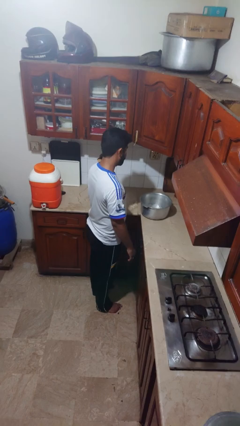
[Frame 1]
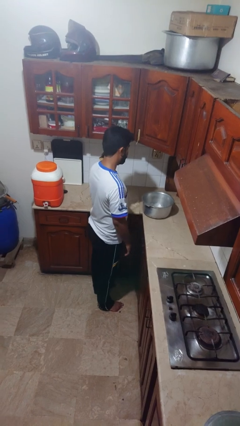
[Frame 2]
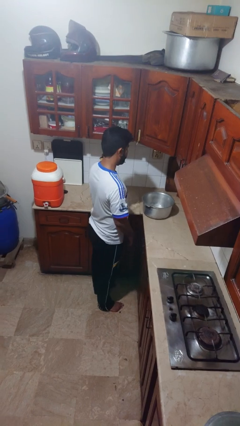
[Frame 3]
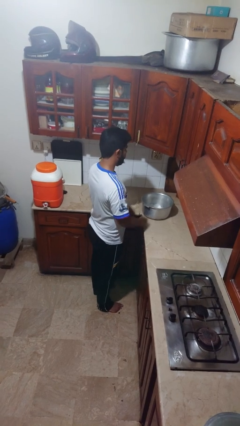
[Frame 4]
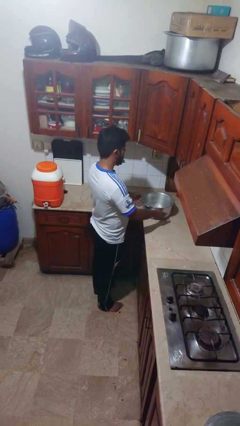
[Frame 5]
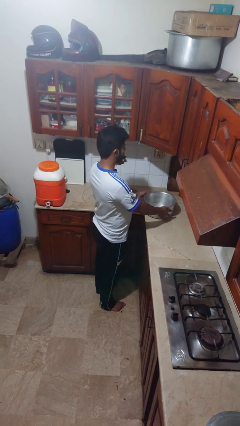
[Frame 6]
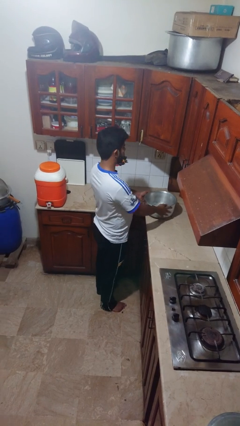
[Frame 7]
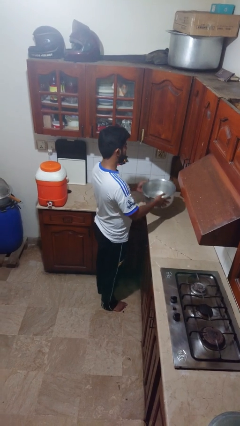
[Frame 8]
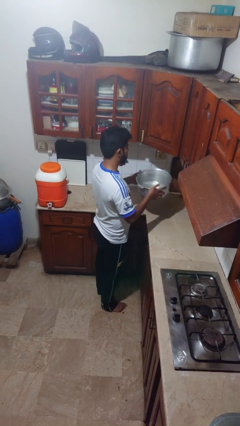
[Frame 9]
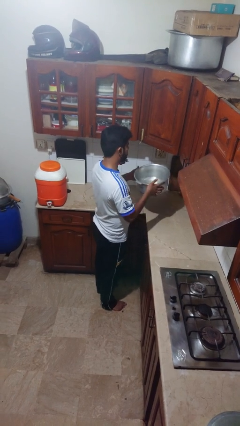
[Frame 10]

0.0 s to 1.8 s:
person picks up object from countertop

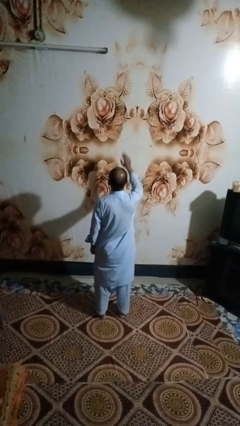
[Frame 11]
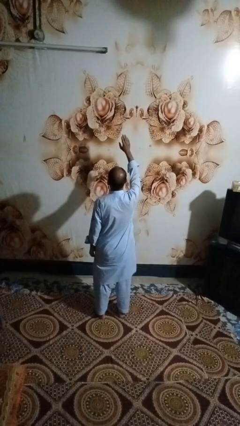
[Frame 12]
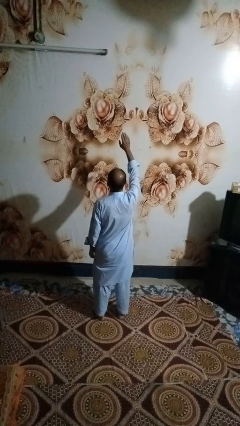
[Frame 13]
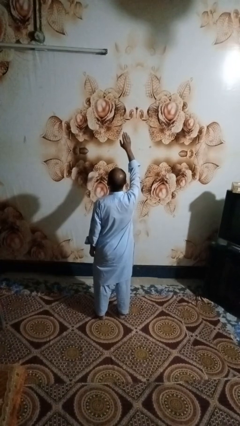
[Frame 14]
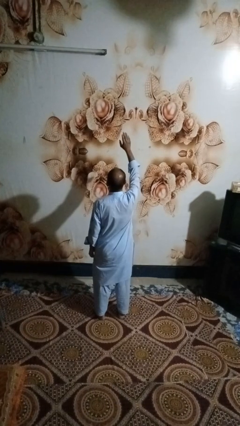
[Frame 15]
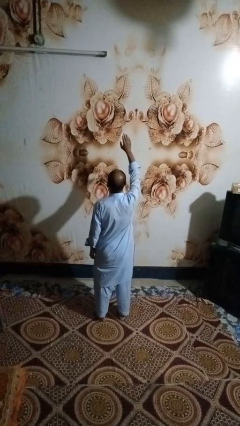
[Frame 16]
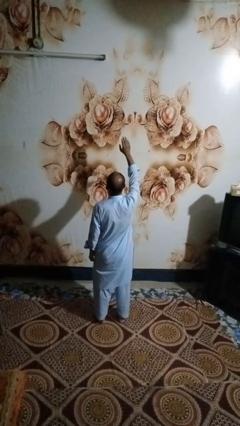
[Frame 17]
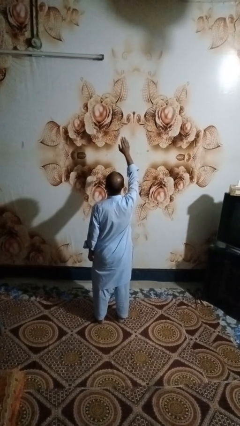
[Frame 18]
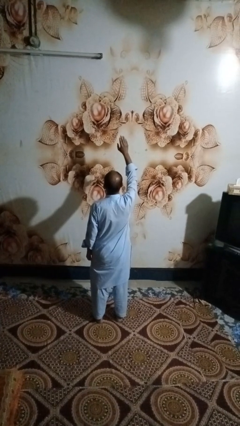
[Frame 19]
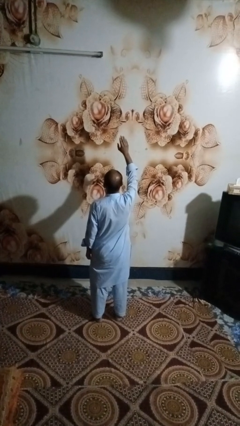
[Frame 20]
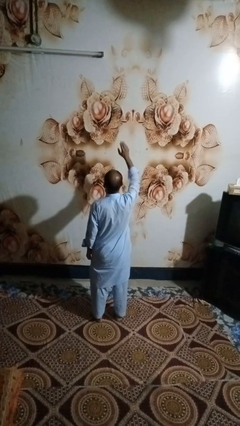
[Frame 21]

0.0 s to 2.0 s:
person gestures raise hand

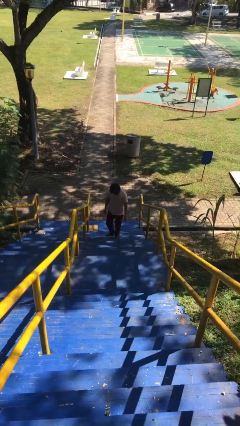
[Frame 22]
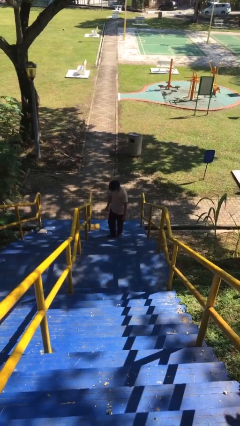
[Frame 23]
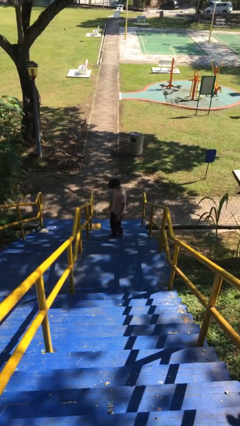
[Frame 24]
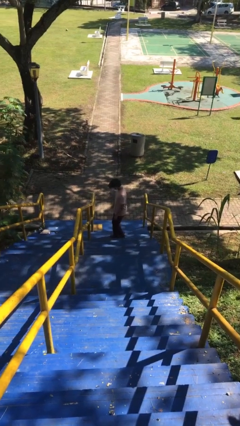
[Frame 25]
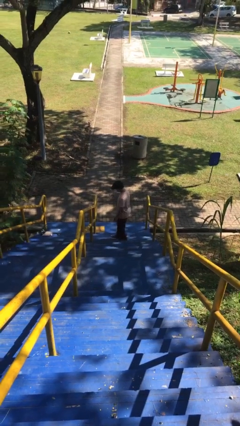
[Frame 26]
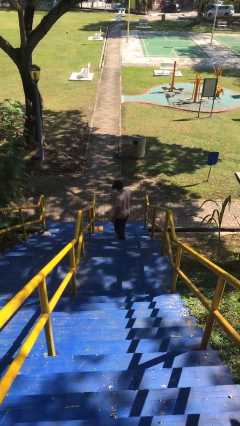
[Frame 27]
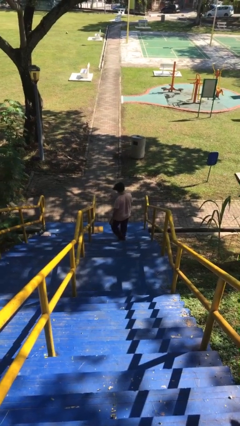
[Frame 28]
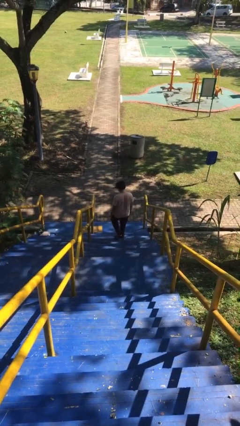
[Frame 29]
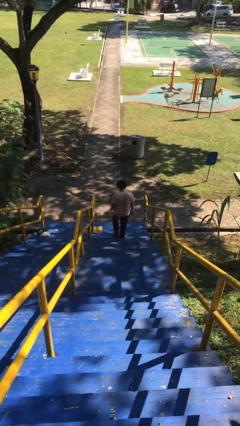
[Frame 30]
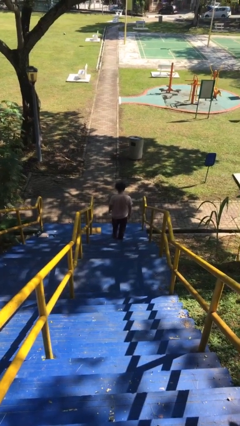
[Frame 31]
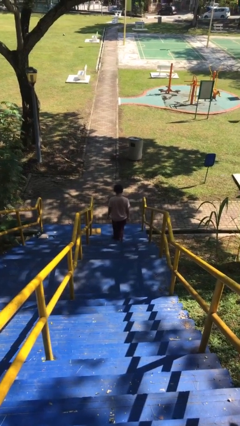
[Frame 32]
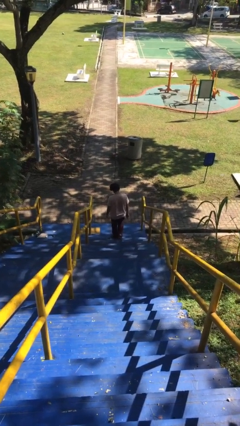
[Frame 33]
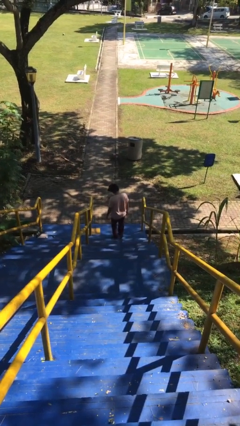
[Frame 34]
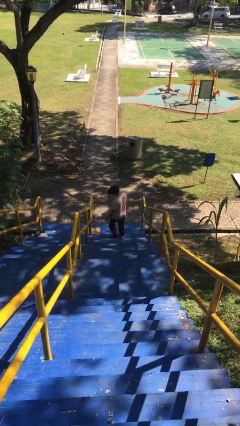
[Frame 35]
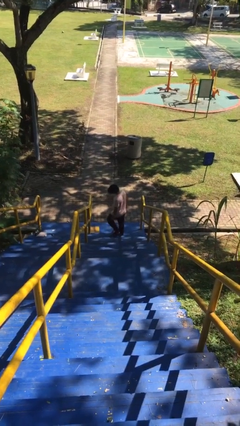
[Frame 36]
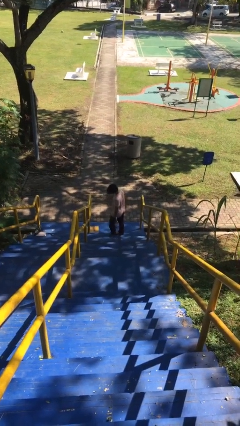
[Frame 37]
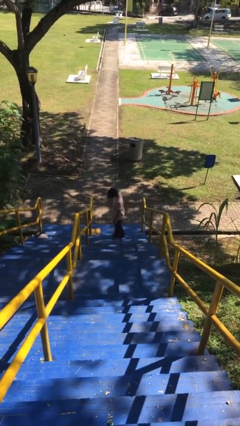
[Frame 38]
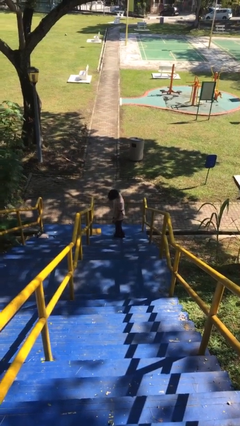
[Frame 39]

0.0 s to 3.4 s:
person climbs down stairs

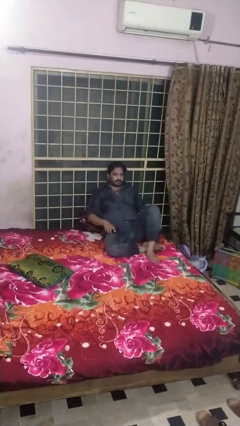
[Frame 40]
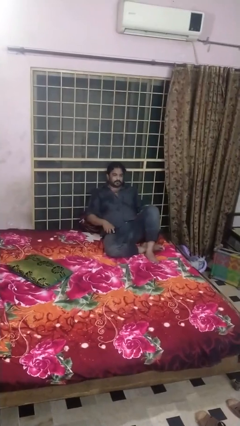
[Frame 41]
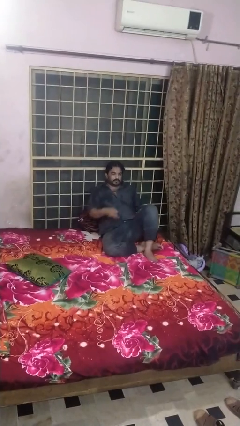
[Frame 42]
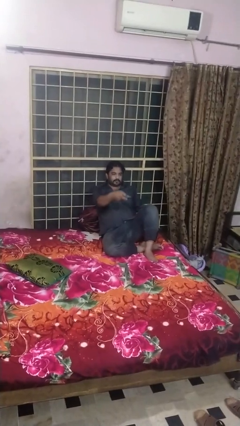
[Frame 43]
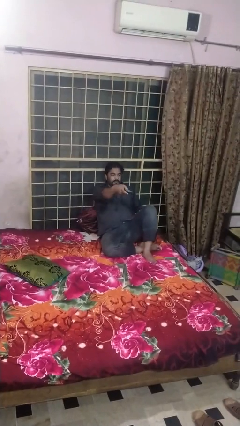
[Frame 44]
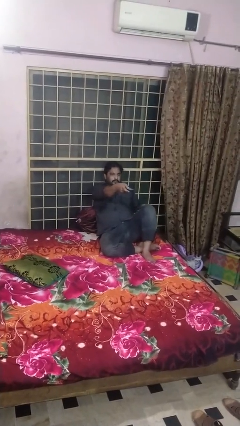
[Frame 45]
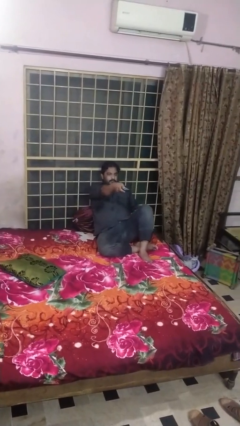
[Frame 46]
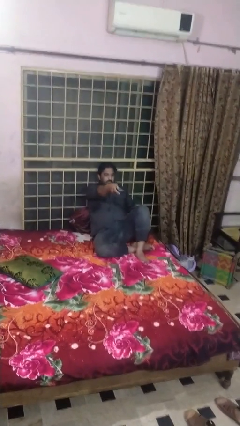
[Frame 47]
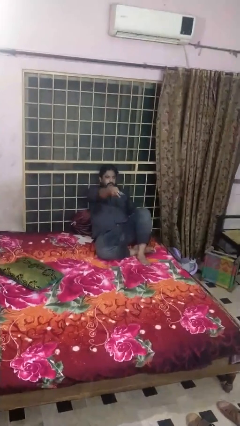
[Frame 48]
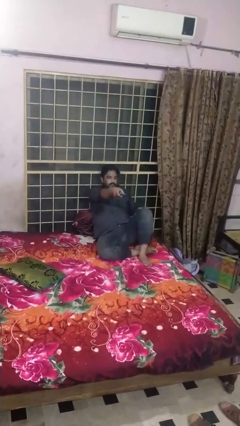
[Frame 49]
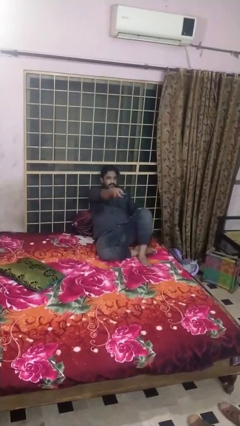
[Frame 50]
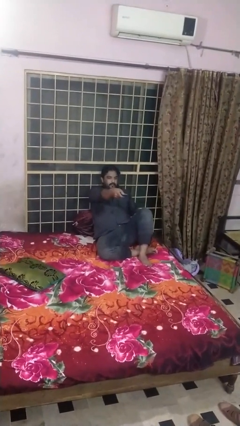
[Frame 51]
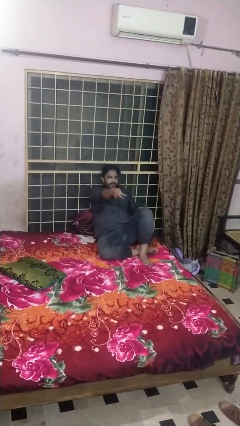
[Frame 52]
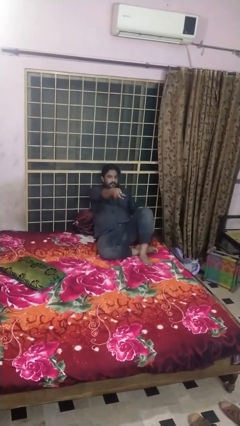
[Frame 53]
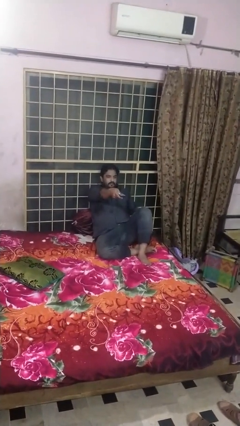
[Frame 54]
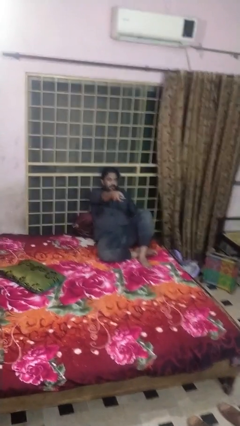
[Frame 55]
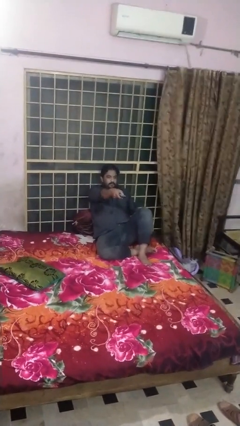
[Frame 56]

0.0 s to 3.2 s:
person uses television remote

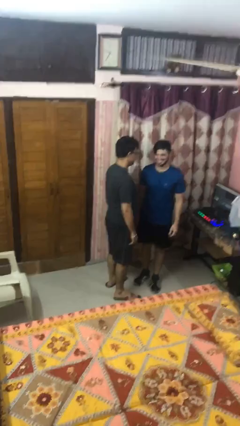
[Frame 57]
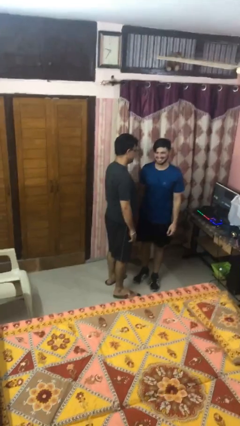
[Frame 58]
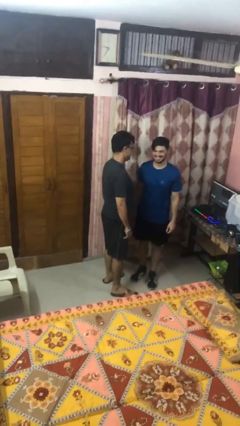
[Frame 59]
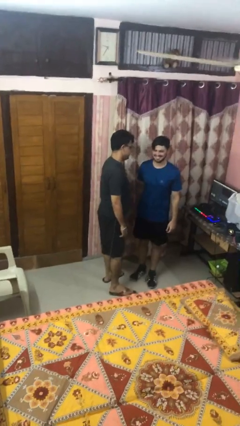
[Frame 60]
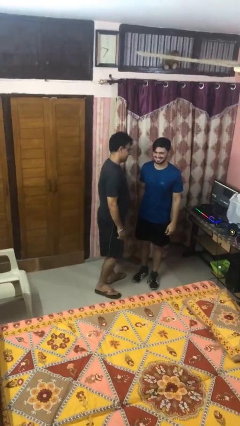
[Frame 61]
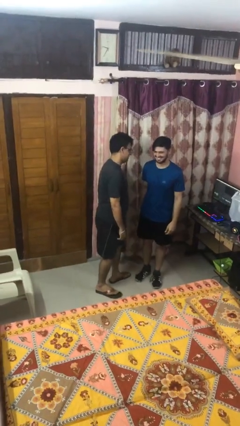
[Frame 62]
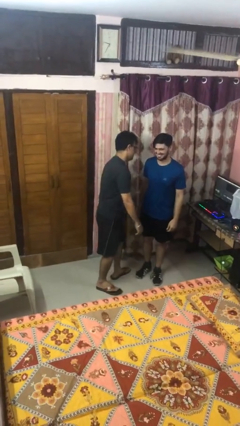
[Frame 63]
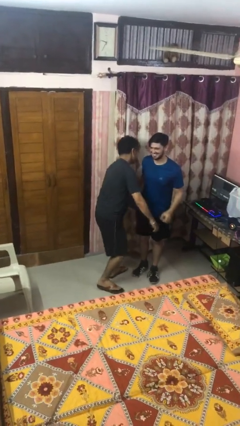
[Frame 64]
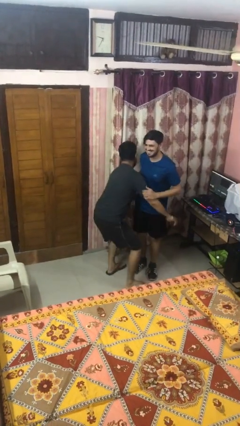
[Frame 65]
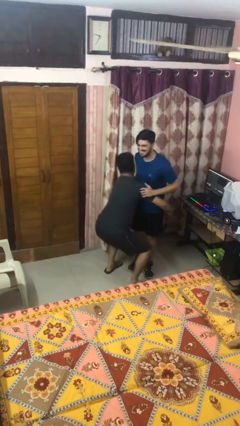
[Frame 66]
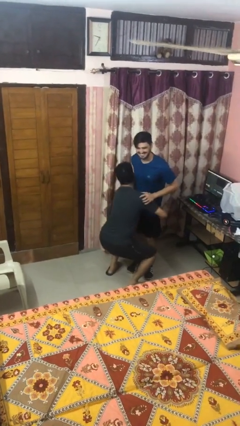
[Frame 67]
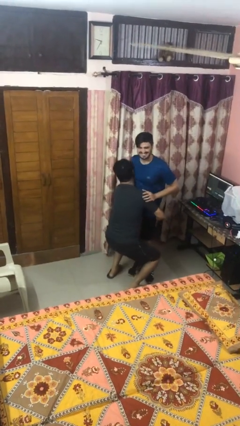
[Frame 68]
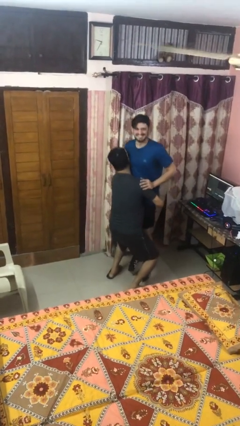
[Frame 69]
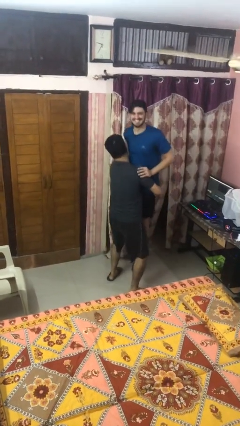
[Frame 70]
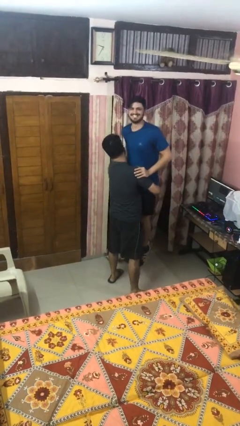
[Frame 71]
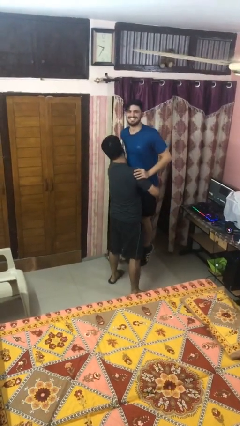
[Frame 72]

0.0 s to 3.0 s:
person picks up person

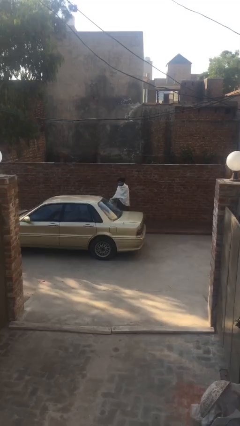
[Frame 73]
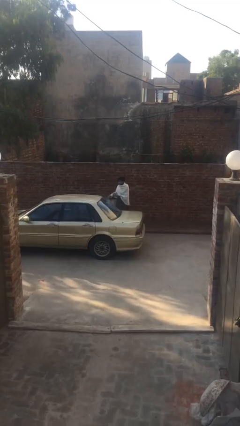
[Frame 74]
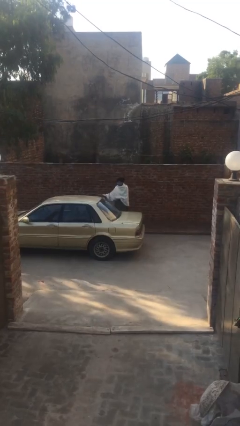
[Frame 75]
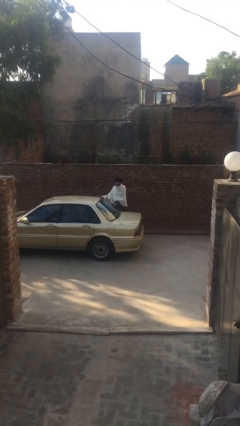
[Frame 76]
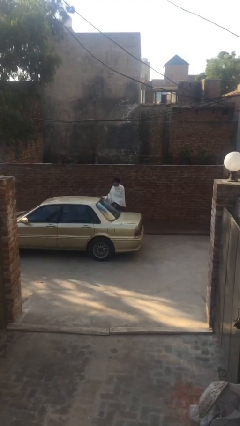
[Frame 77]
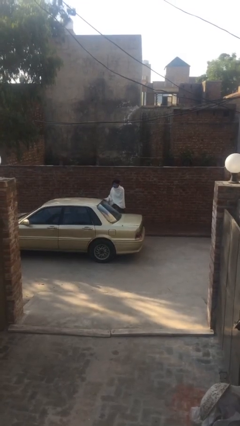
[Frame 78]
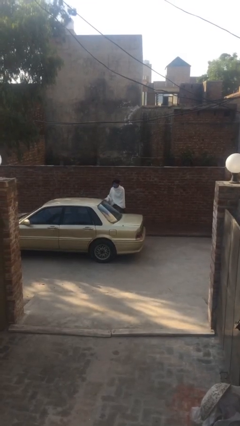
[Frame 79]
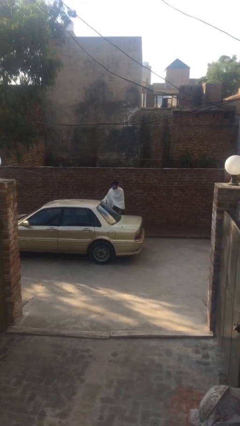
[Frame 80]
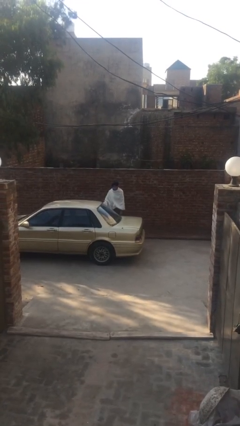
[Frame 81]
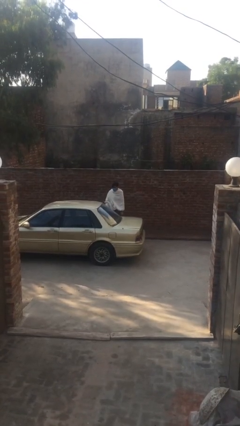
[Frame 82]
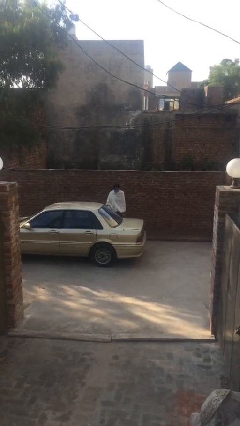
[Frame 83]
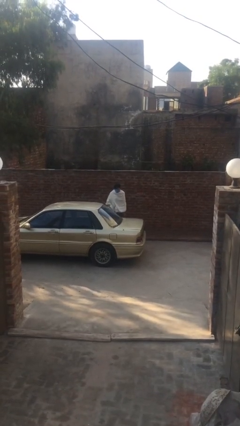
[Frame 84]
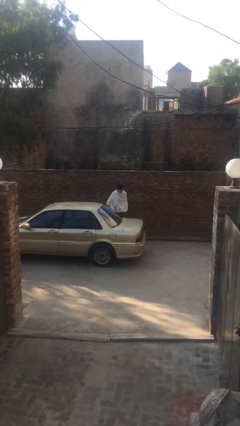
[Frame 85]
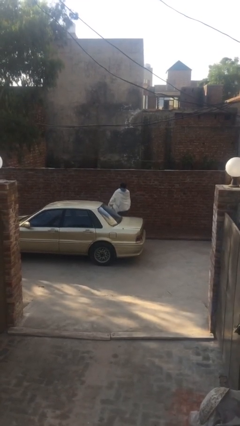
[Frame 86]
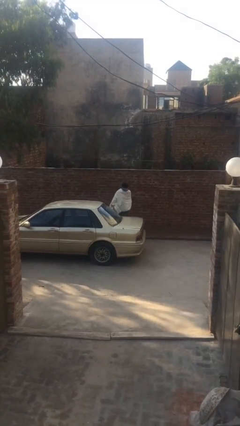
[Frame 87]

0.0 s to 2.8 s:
person closes car door

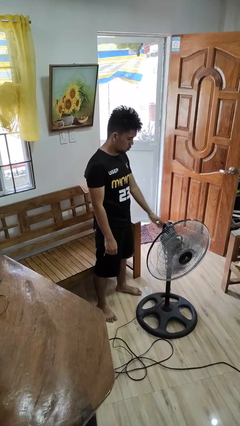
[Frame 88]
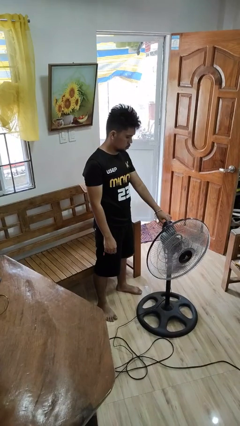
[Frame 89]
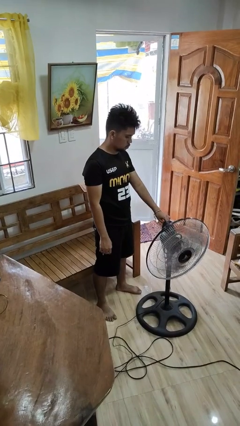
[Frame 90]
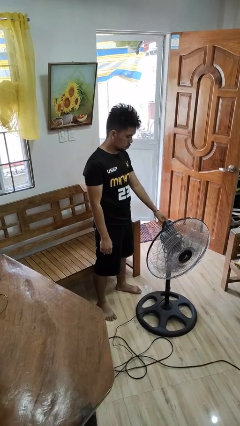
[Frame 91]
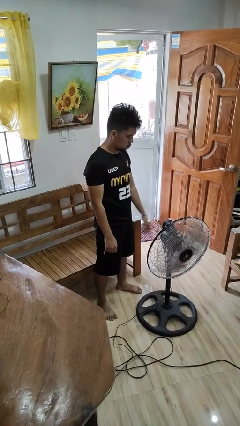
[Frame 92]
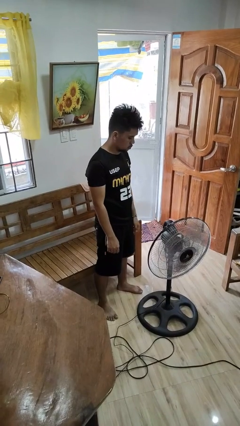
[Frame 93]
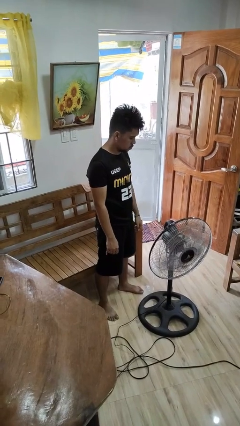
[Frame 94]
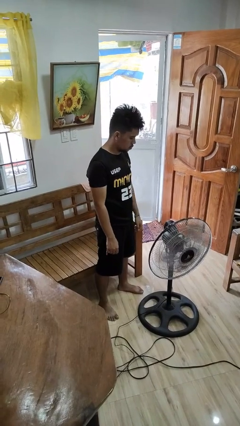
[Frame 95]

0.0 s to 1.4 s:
person turns off fan
